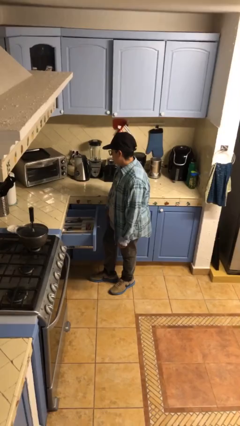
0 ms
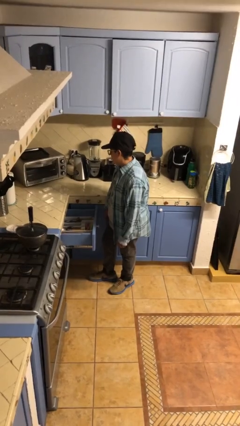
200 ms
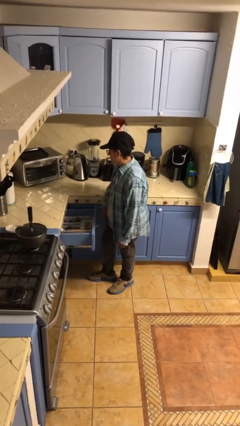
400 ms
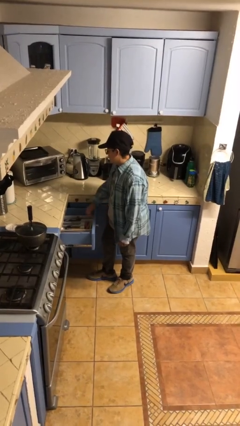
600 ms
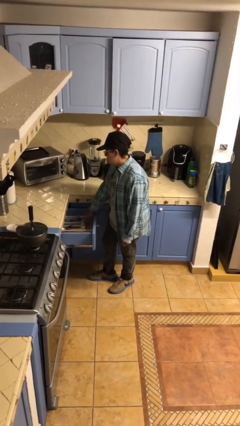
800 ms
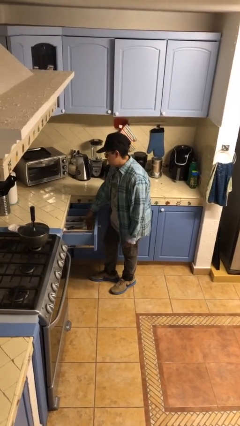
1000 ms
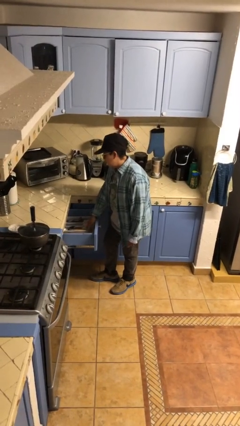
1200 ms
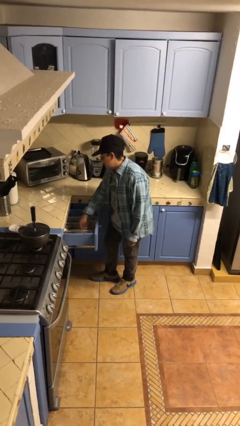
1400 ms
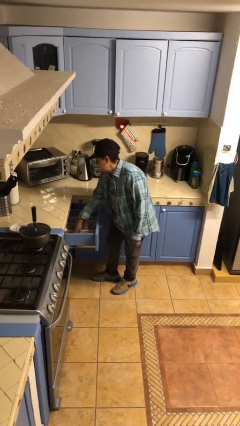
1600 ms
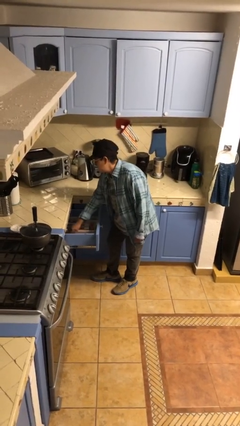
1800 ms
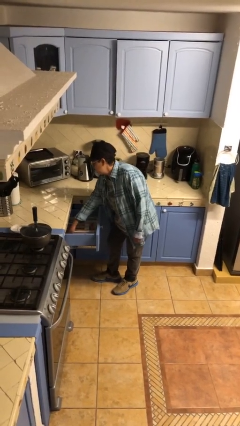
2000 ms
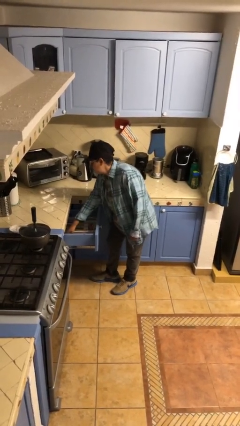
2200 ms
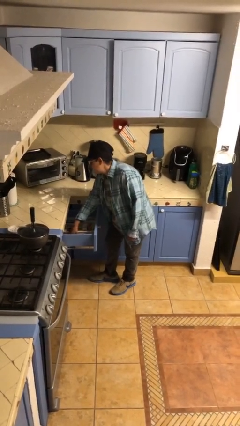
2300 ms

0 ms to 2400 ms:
person searches in kitchen drawer

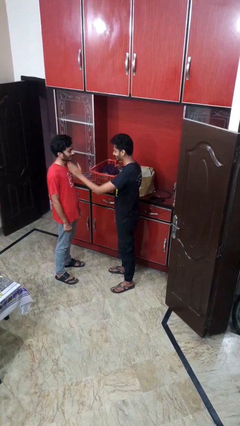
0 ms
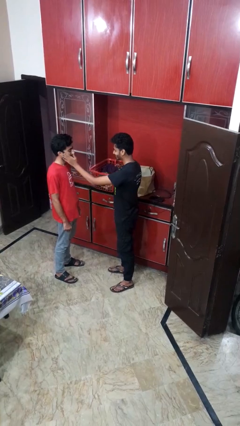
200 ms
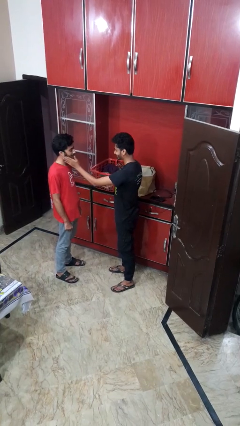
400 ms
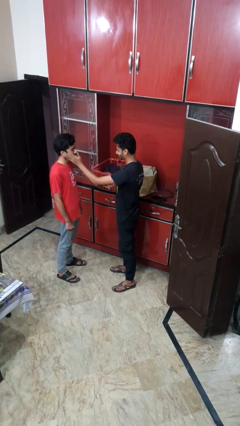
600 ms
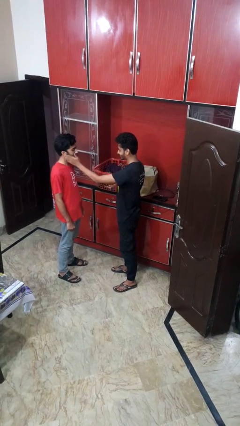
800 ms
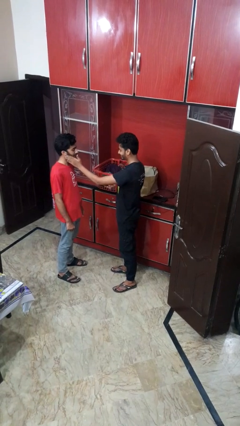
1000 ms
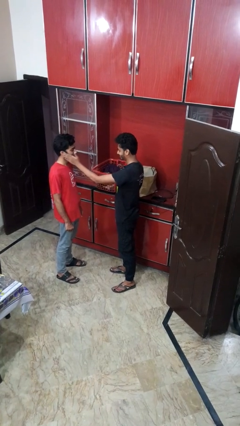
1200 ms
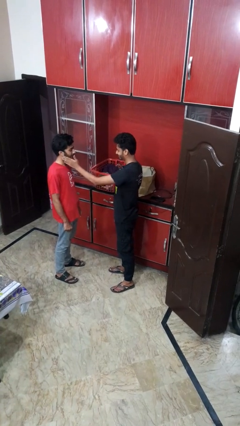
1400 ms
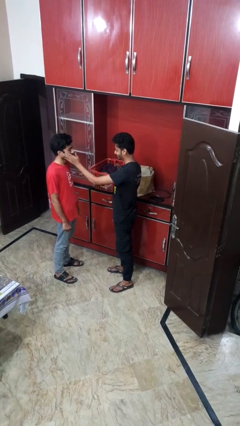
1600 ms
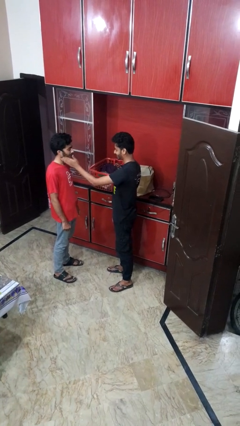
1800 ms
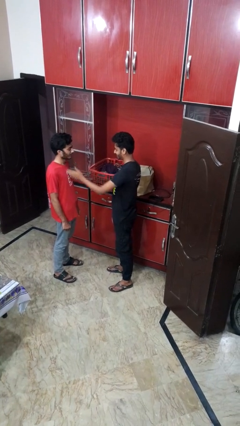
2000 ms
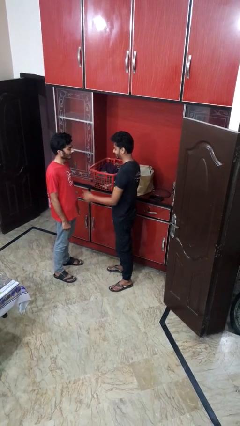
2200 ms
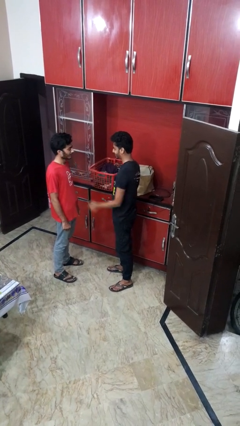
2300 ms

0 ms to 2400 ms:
person touches face of person

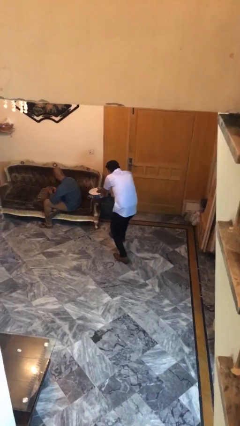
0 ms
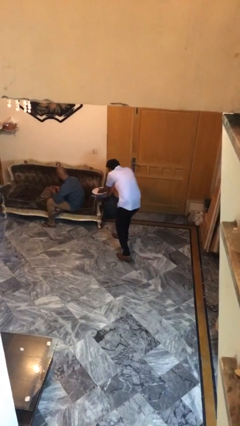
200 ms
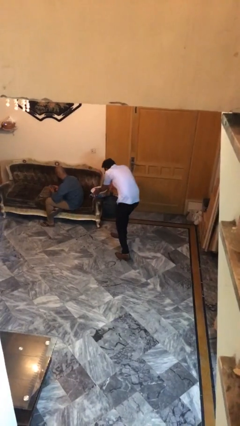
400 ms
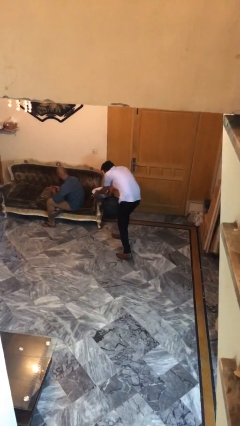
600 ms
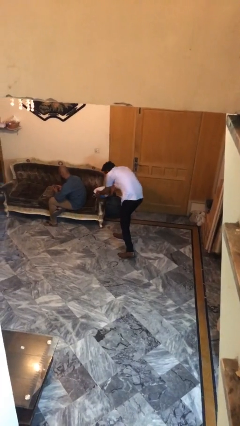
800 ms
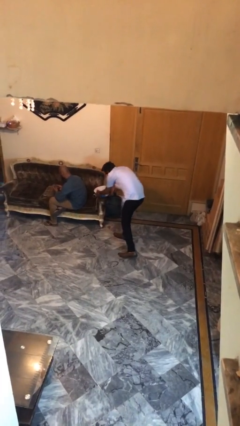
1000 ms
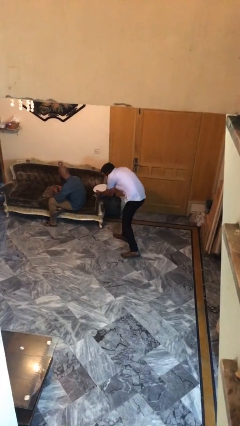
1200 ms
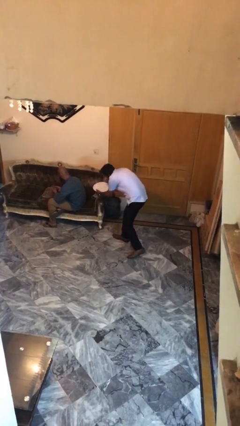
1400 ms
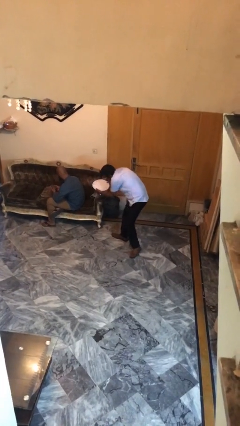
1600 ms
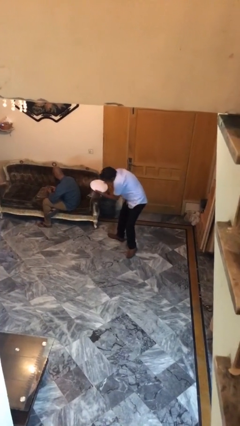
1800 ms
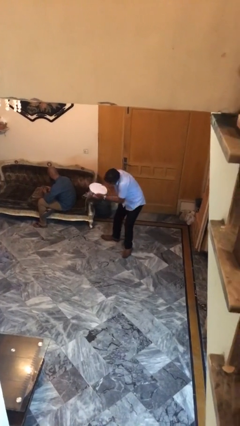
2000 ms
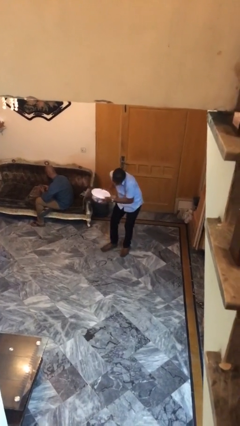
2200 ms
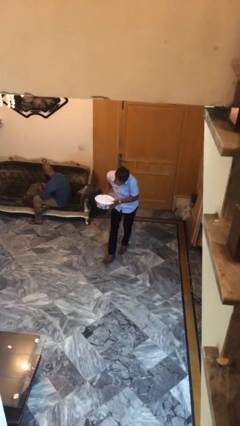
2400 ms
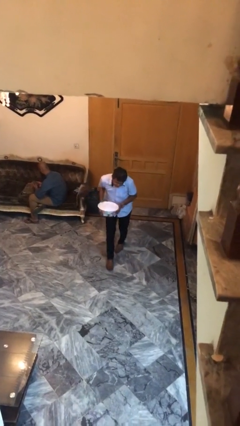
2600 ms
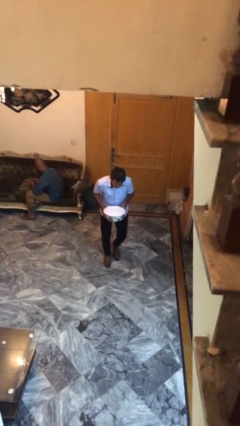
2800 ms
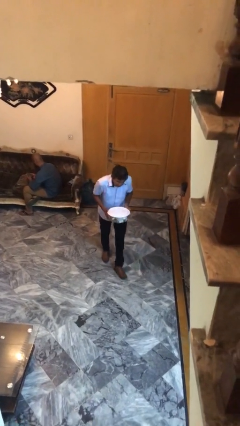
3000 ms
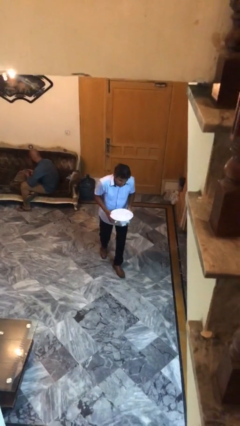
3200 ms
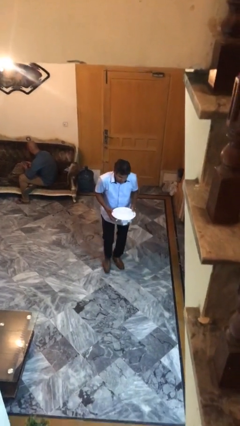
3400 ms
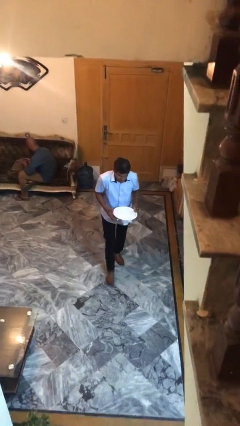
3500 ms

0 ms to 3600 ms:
person steals object from person

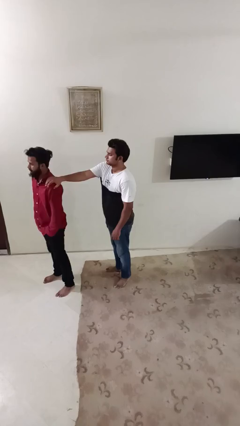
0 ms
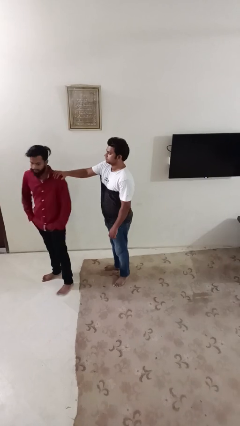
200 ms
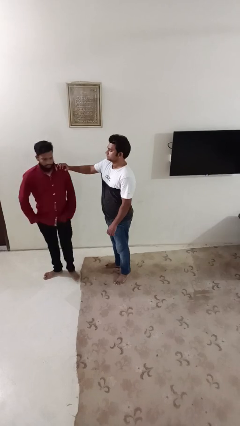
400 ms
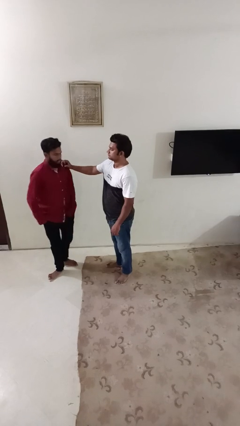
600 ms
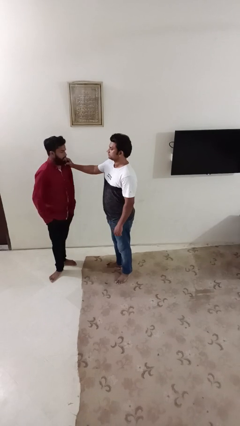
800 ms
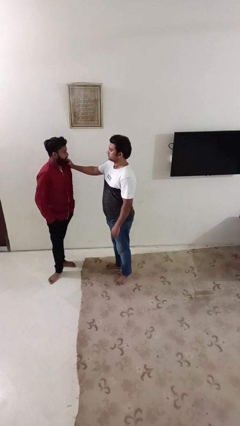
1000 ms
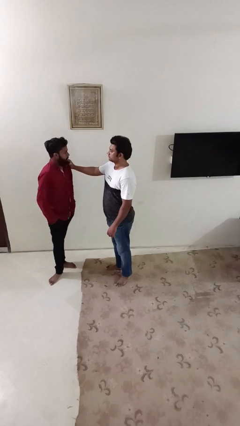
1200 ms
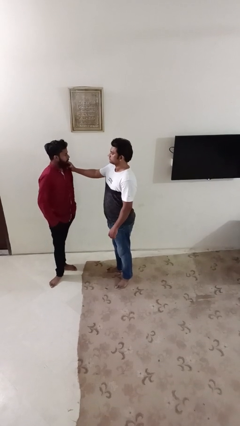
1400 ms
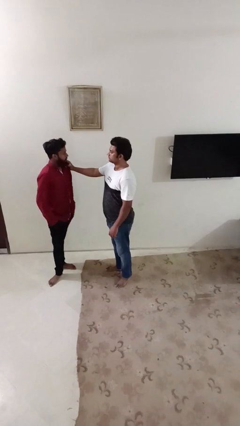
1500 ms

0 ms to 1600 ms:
person spins person around

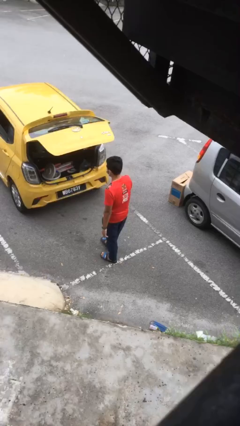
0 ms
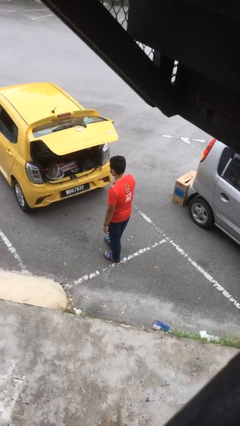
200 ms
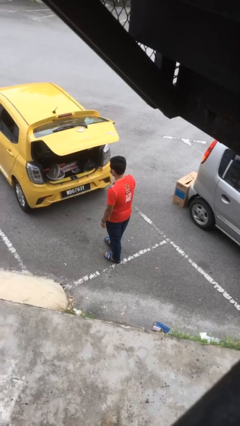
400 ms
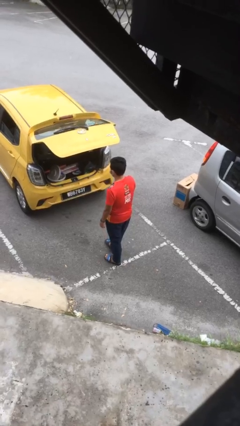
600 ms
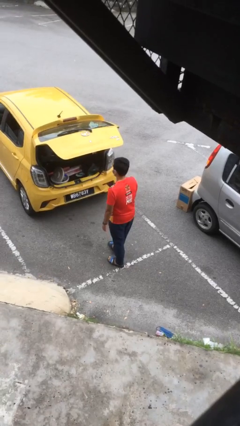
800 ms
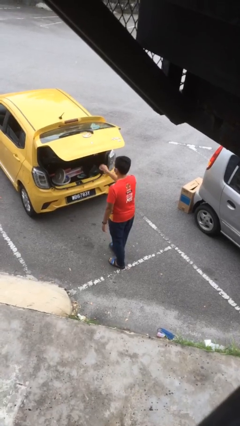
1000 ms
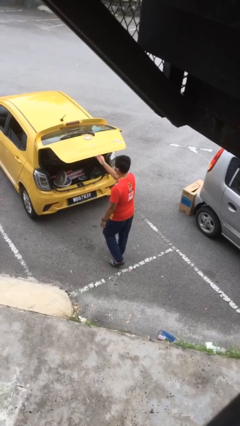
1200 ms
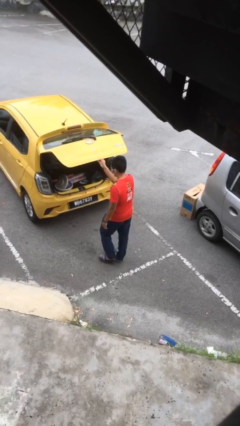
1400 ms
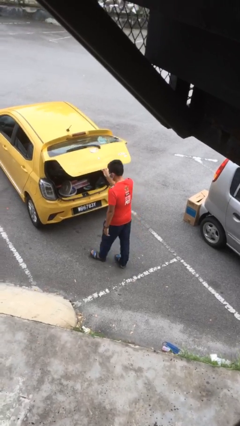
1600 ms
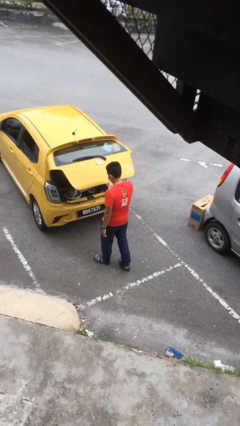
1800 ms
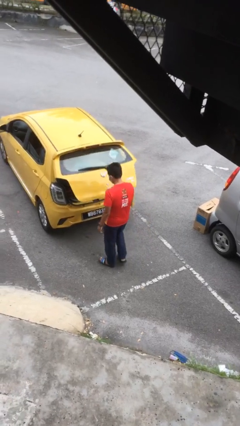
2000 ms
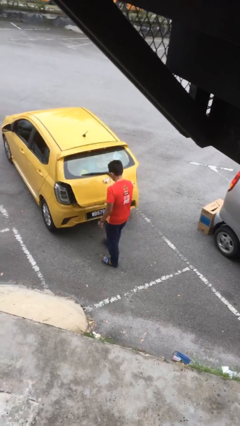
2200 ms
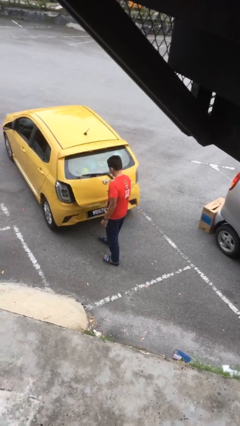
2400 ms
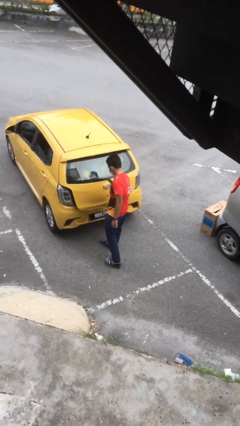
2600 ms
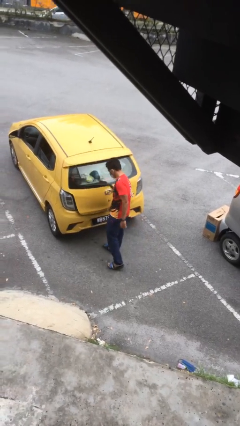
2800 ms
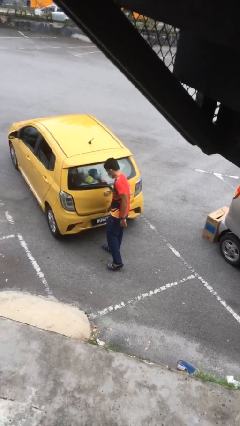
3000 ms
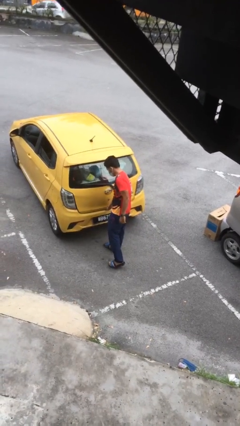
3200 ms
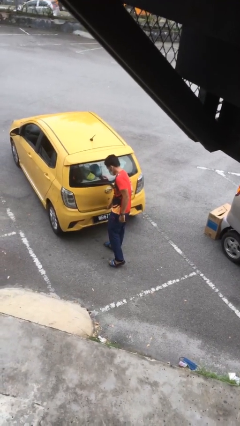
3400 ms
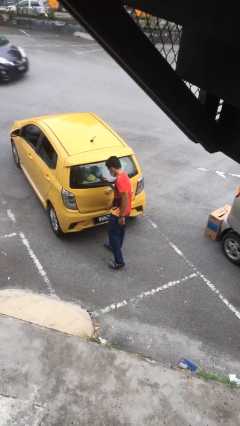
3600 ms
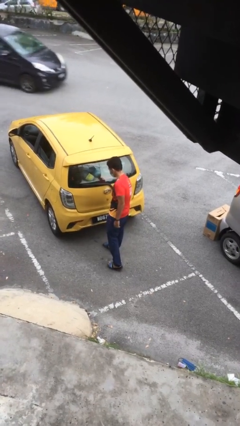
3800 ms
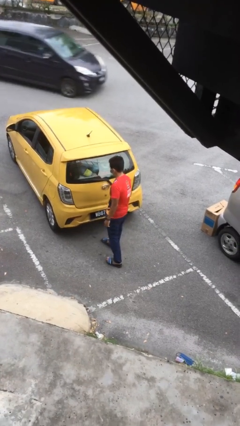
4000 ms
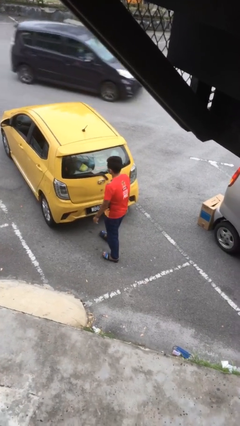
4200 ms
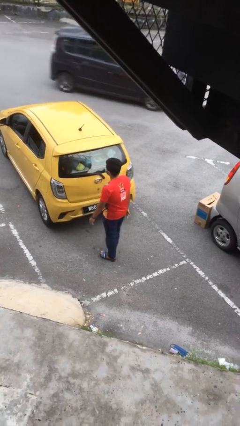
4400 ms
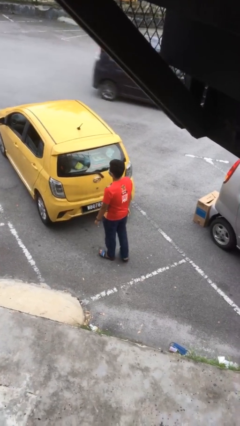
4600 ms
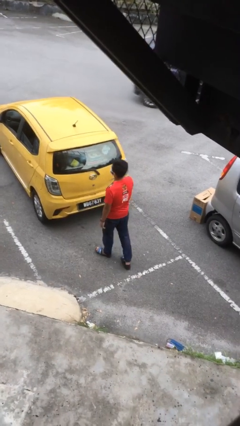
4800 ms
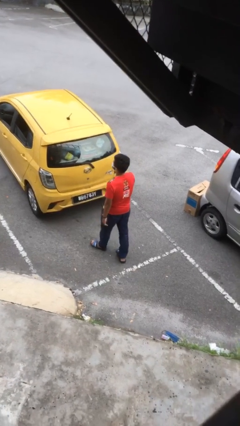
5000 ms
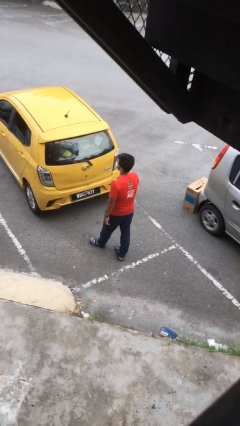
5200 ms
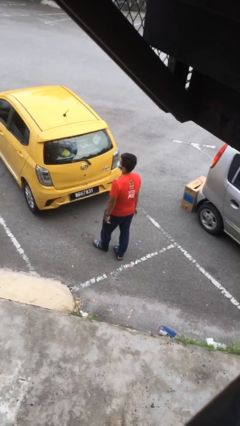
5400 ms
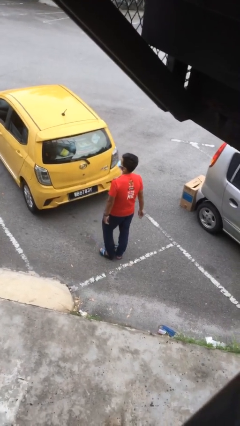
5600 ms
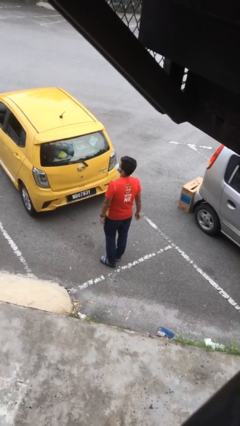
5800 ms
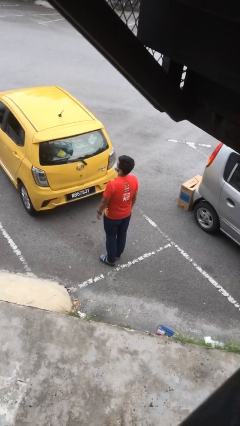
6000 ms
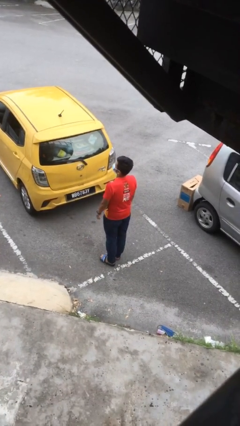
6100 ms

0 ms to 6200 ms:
person closes car trunk

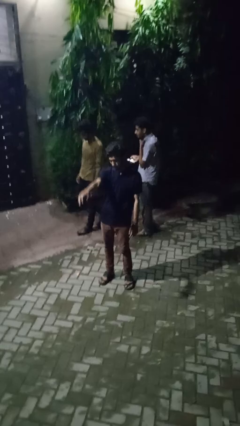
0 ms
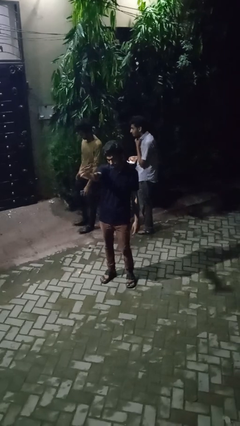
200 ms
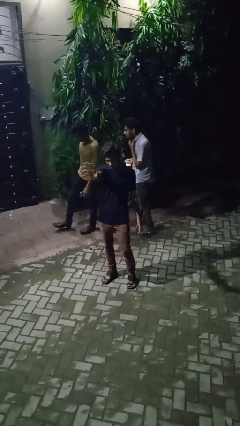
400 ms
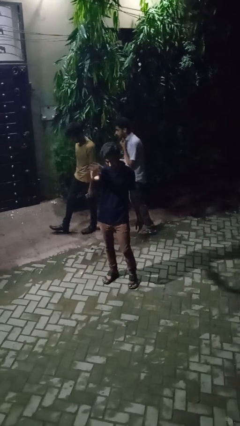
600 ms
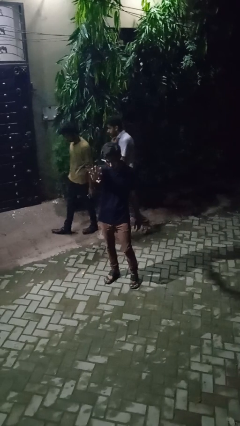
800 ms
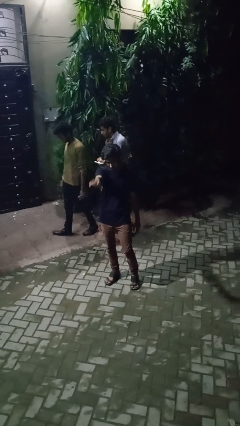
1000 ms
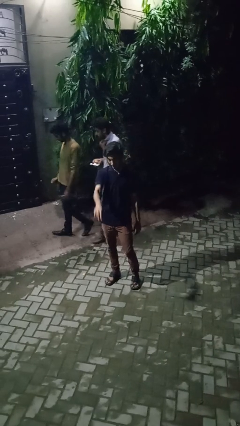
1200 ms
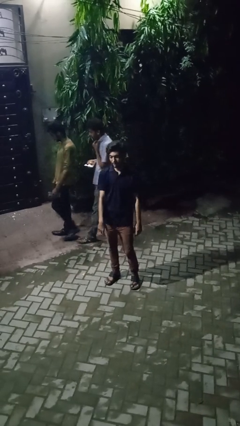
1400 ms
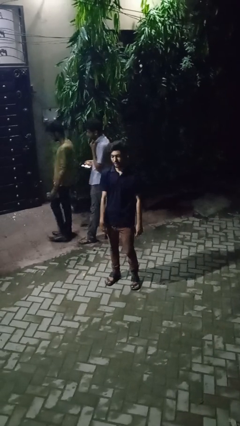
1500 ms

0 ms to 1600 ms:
person waves at person

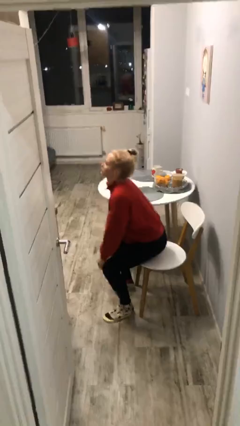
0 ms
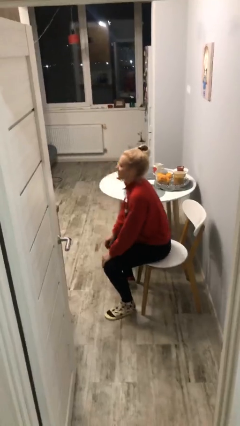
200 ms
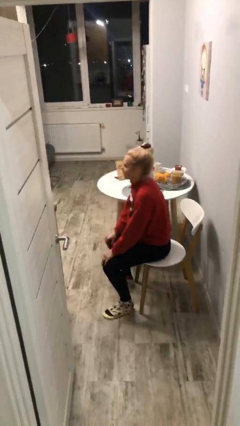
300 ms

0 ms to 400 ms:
person sits down
